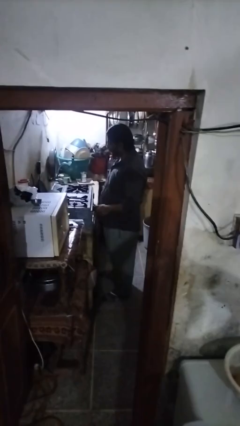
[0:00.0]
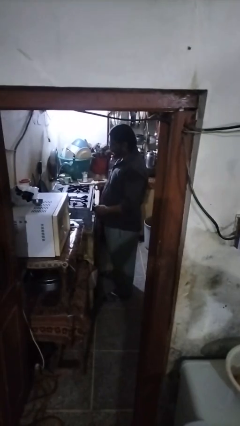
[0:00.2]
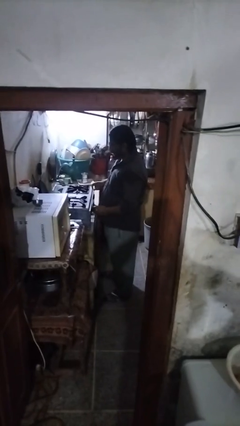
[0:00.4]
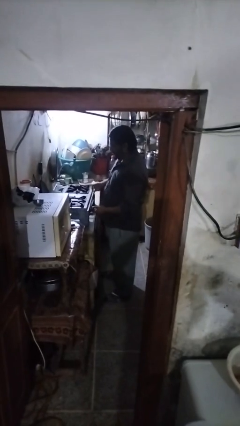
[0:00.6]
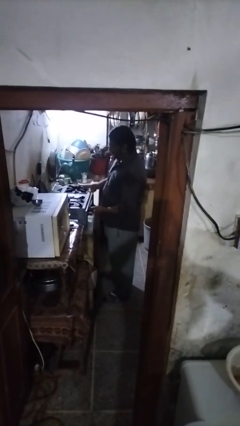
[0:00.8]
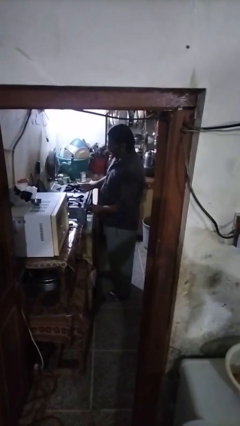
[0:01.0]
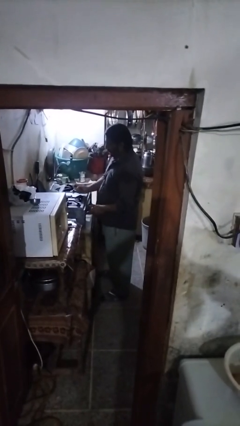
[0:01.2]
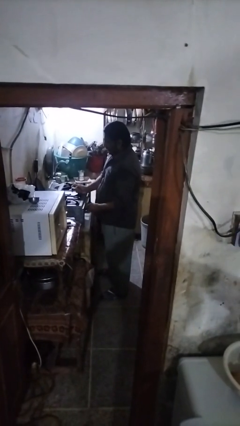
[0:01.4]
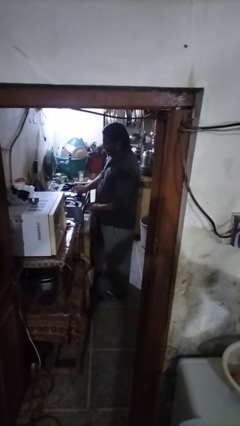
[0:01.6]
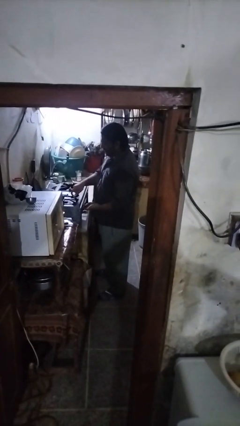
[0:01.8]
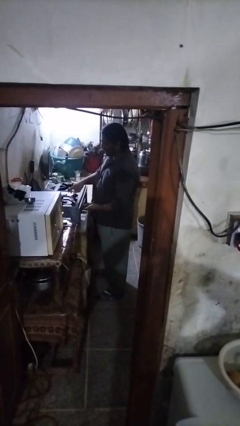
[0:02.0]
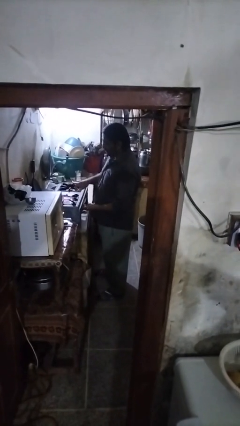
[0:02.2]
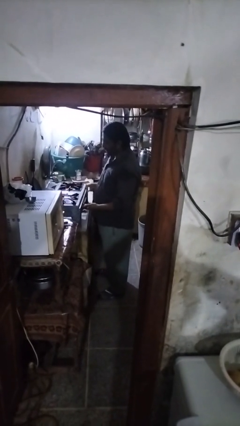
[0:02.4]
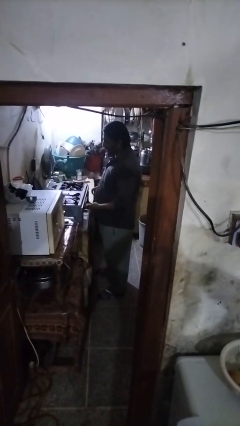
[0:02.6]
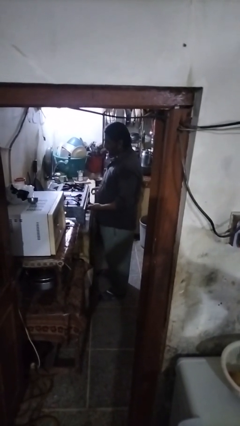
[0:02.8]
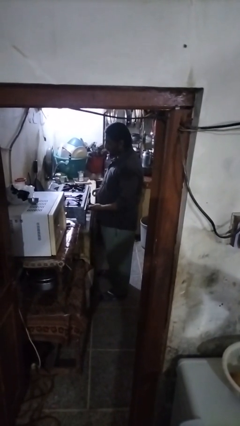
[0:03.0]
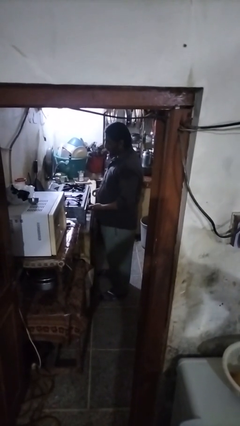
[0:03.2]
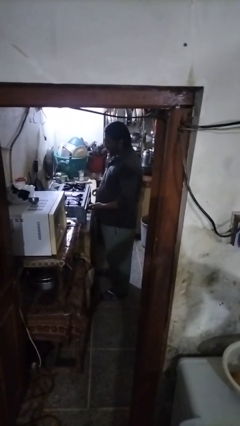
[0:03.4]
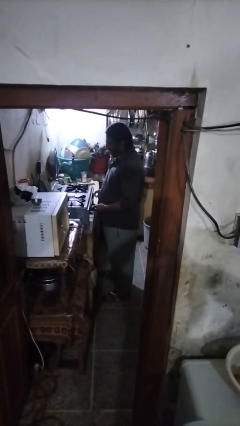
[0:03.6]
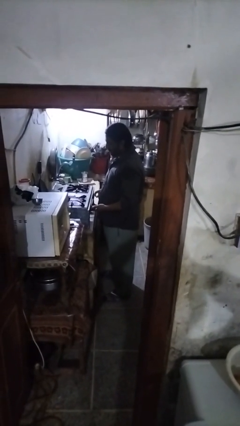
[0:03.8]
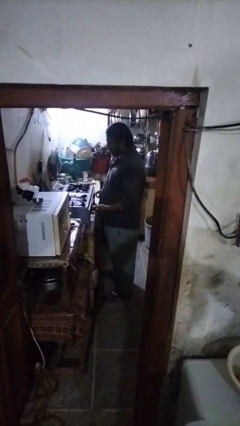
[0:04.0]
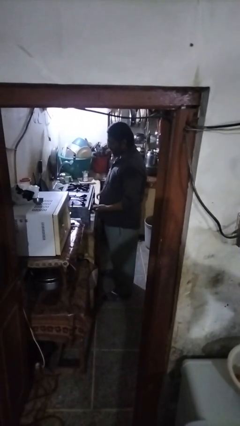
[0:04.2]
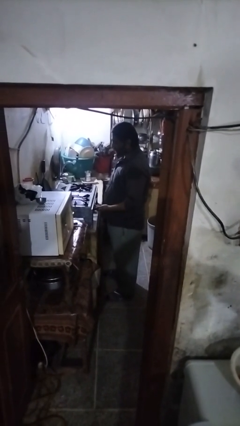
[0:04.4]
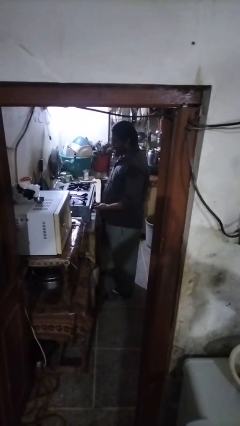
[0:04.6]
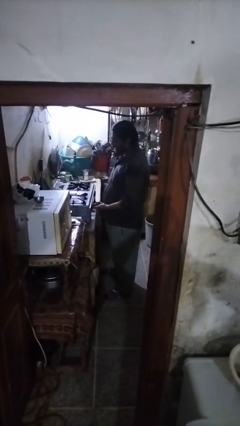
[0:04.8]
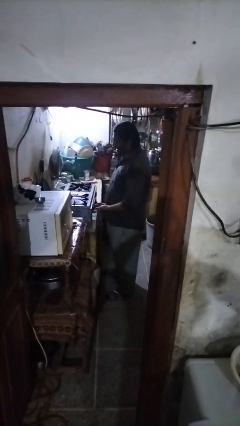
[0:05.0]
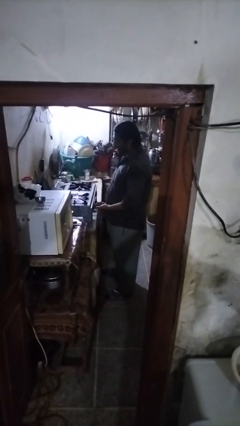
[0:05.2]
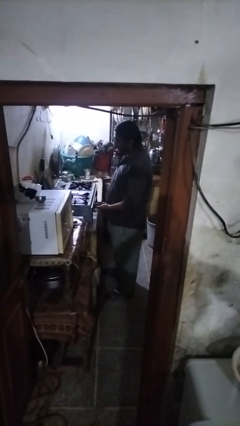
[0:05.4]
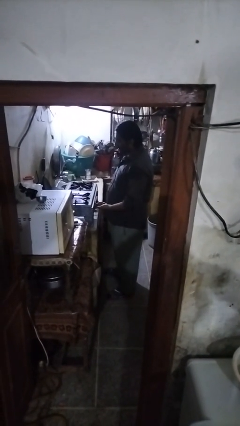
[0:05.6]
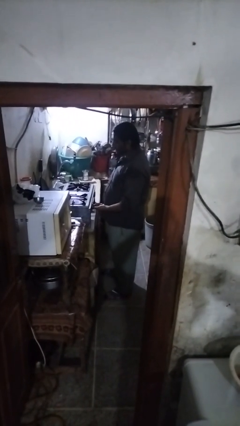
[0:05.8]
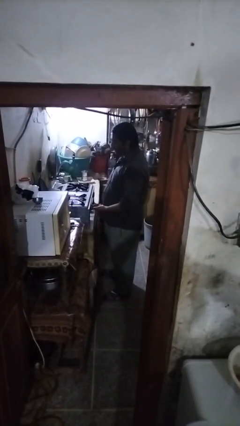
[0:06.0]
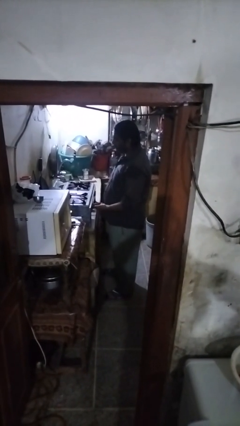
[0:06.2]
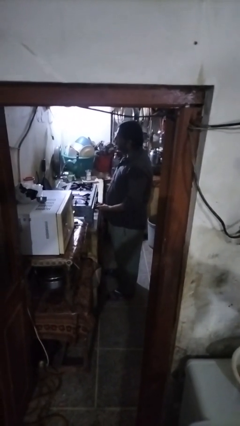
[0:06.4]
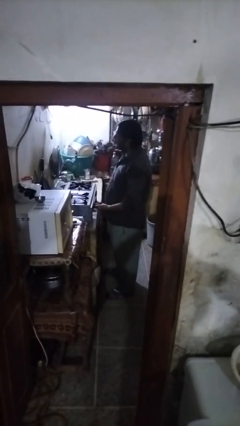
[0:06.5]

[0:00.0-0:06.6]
person turns on stovetop

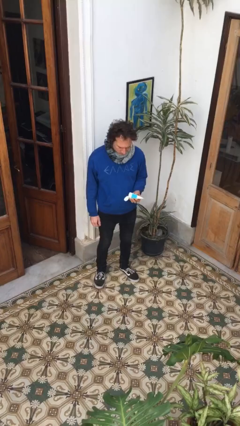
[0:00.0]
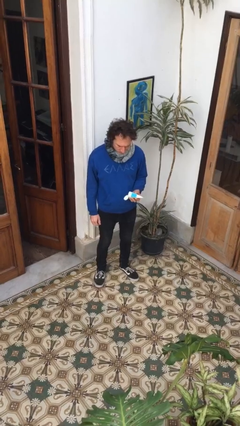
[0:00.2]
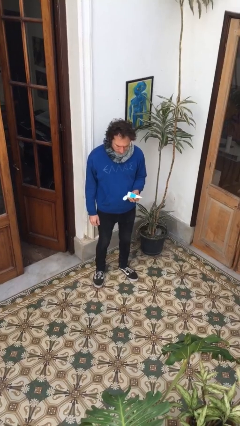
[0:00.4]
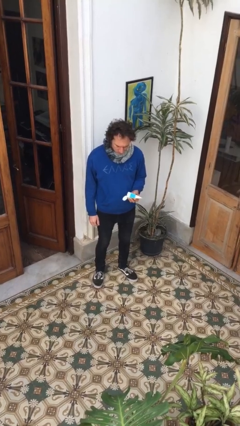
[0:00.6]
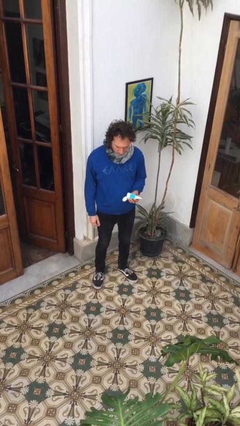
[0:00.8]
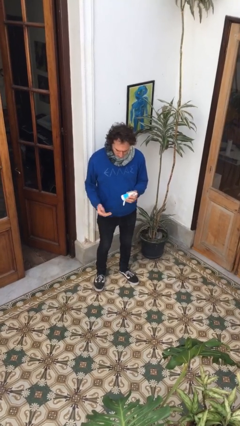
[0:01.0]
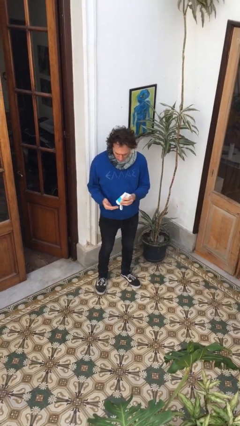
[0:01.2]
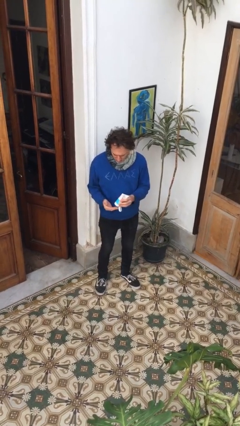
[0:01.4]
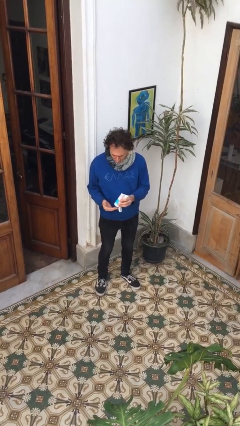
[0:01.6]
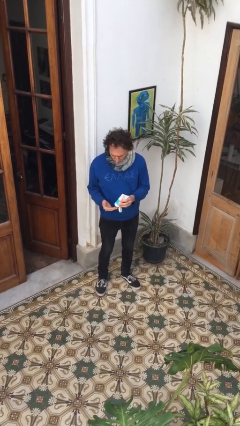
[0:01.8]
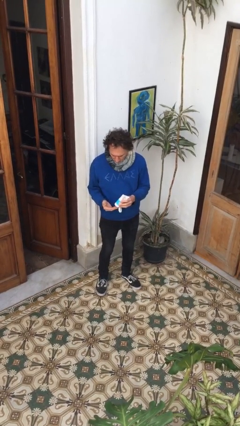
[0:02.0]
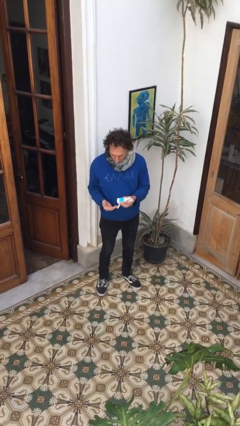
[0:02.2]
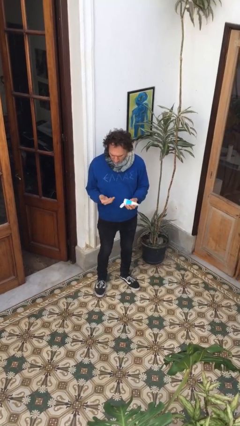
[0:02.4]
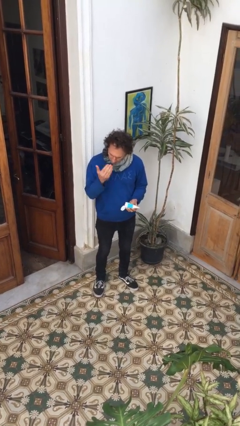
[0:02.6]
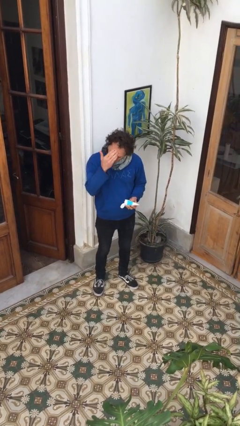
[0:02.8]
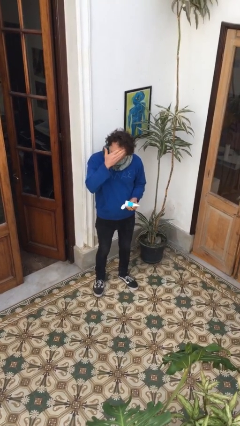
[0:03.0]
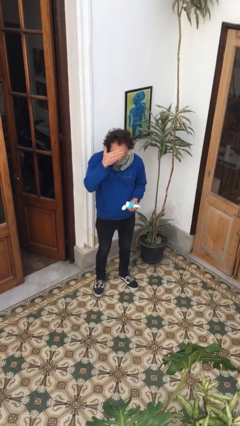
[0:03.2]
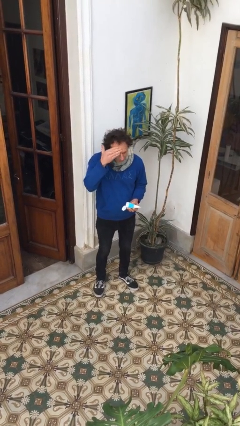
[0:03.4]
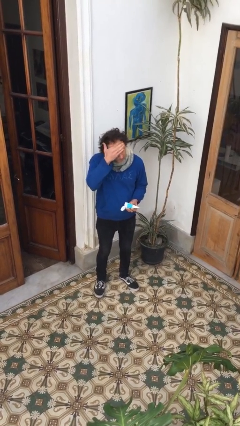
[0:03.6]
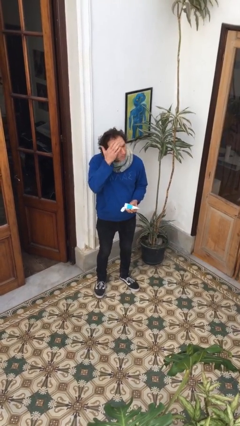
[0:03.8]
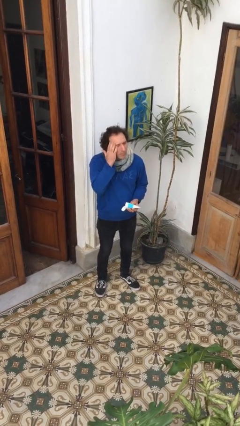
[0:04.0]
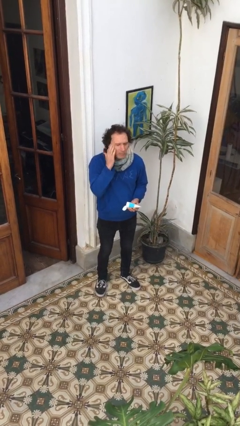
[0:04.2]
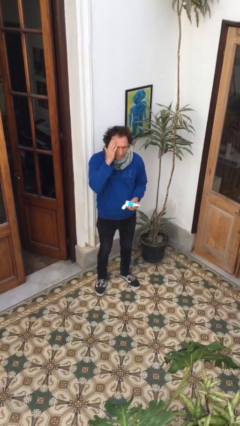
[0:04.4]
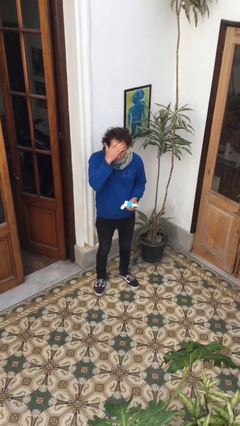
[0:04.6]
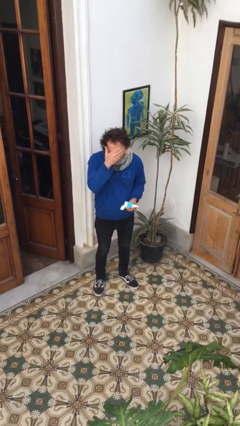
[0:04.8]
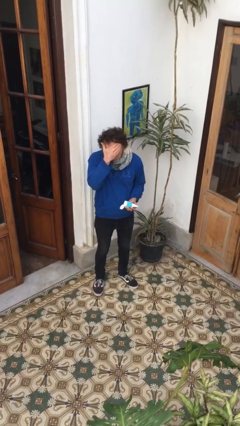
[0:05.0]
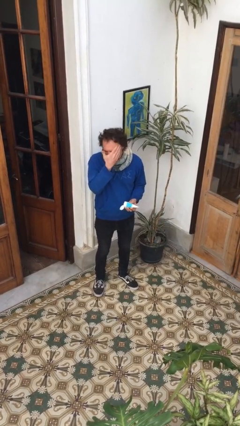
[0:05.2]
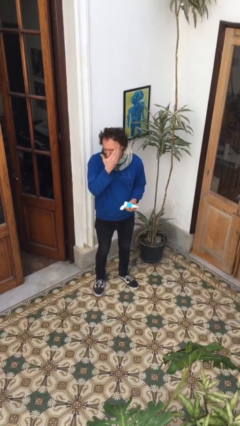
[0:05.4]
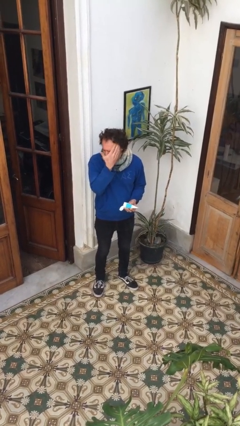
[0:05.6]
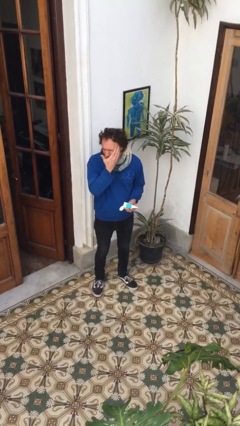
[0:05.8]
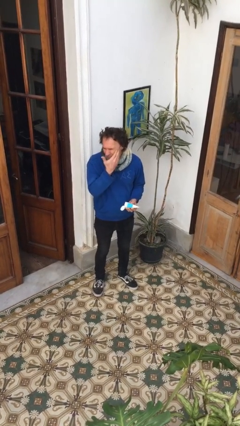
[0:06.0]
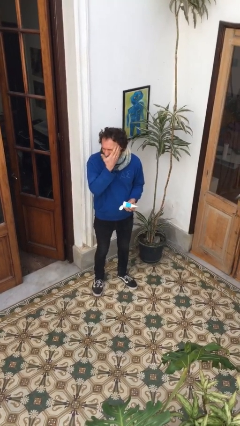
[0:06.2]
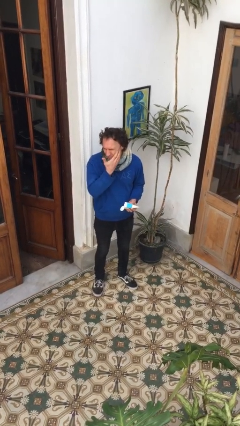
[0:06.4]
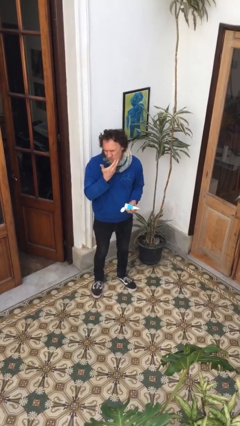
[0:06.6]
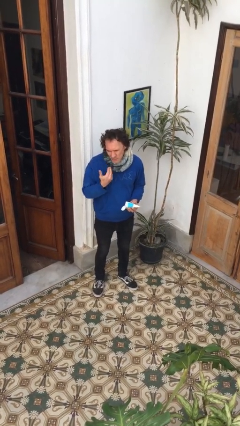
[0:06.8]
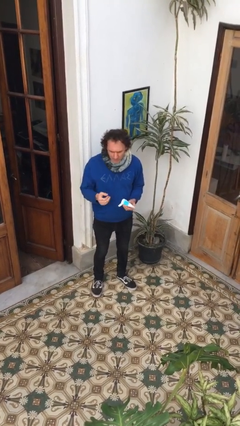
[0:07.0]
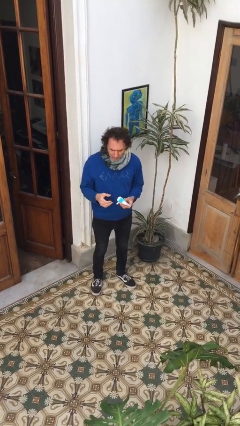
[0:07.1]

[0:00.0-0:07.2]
person applies facial moisturizer

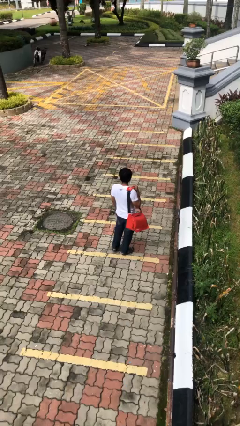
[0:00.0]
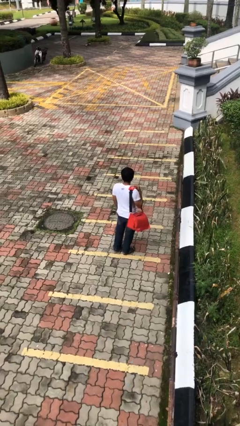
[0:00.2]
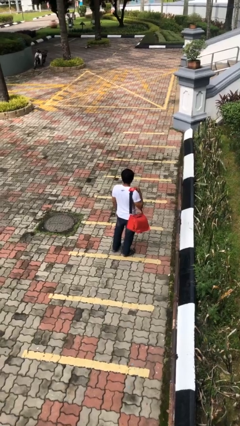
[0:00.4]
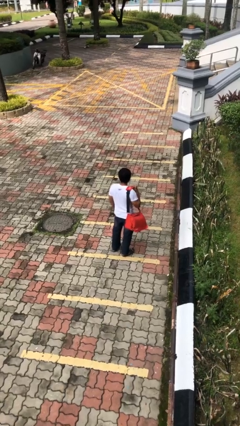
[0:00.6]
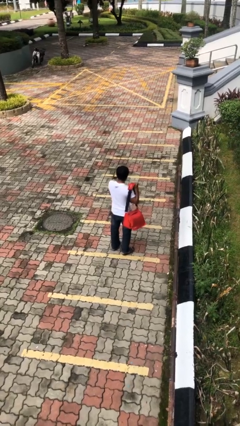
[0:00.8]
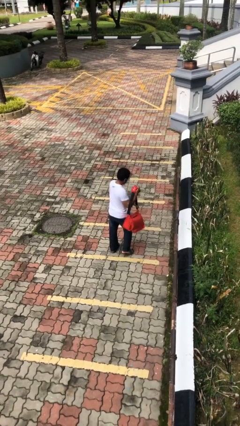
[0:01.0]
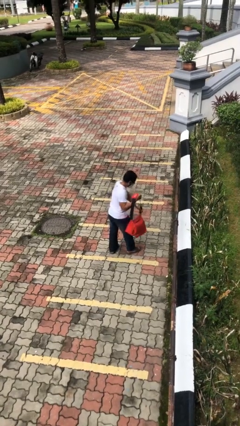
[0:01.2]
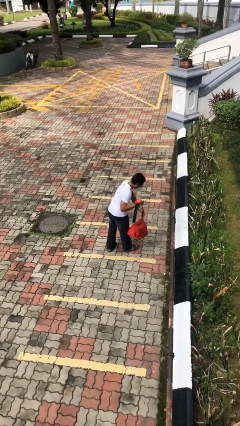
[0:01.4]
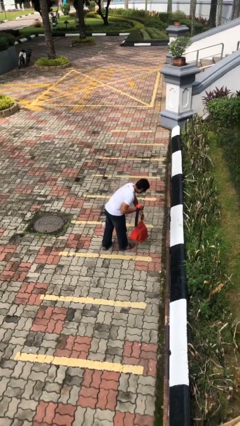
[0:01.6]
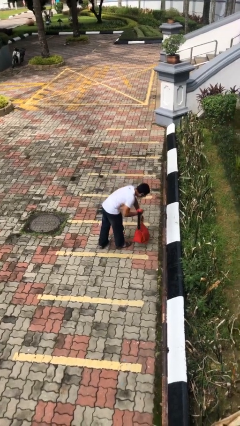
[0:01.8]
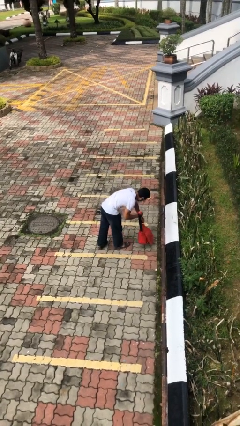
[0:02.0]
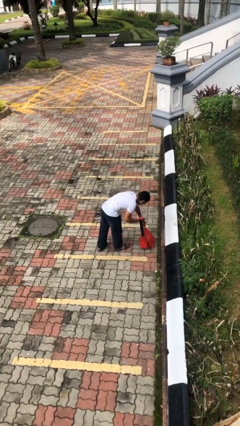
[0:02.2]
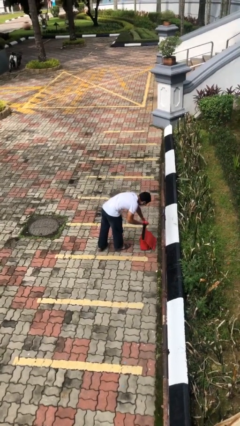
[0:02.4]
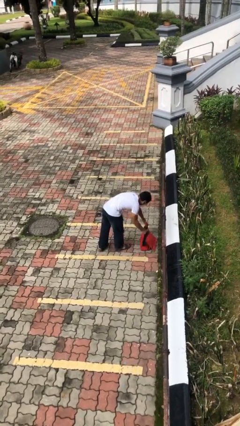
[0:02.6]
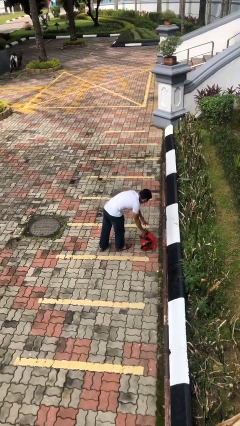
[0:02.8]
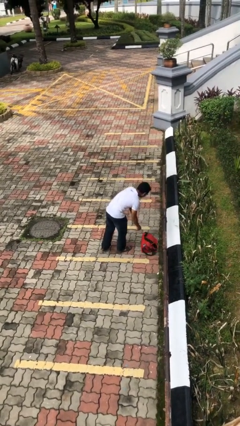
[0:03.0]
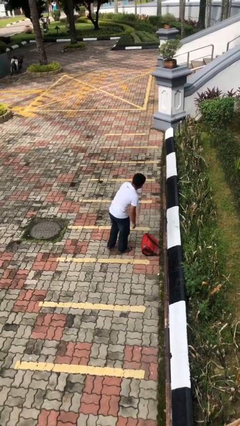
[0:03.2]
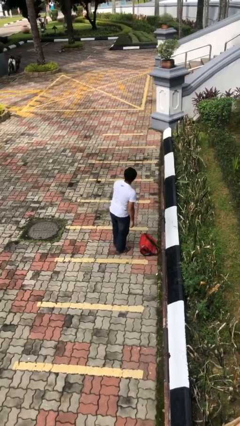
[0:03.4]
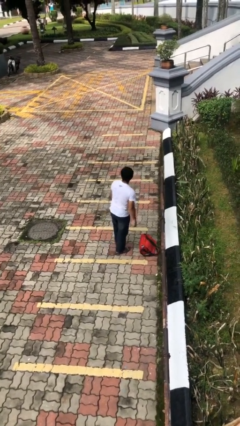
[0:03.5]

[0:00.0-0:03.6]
person puts down object on floor

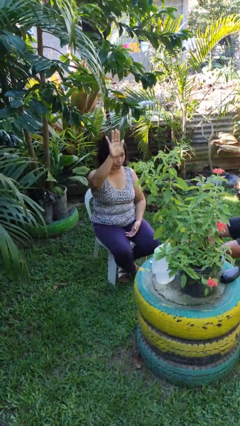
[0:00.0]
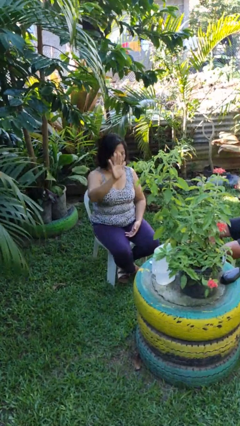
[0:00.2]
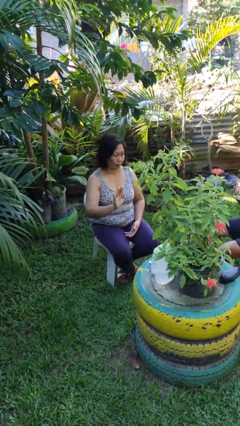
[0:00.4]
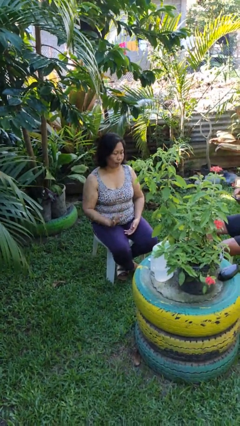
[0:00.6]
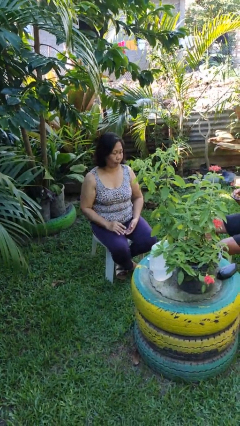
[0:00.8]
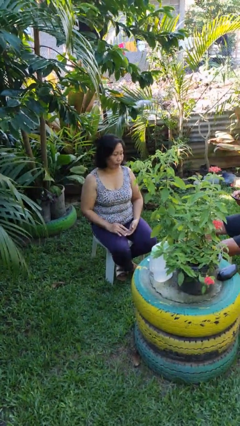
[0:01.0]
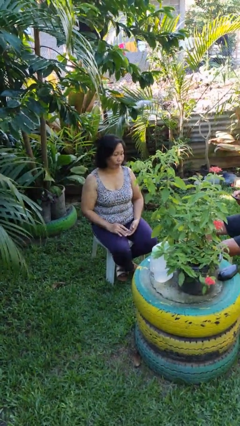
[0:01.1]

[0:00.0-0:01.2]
person gestures swipe down
